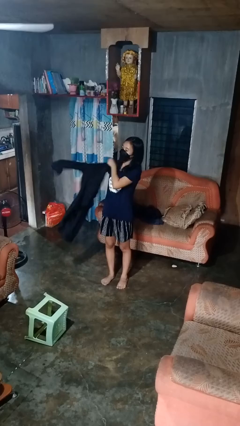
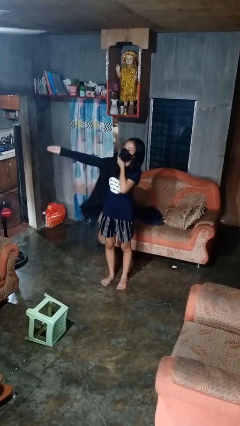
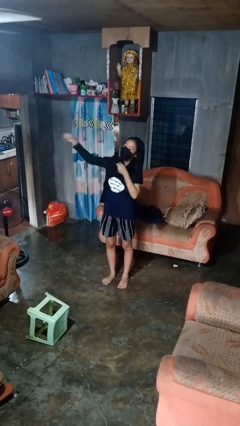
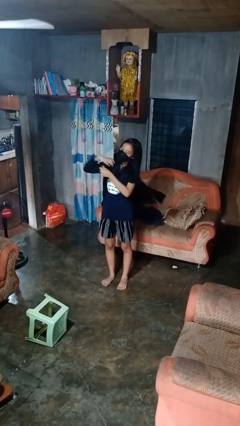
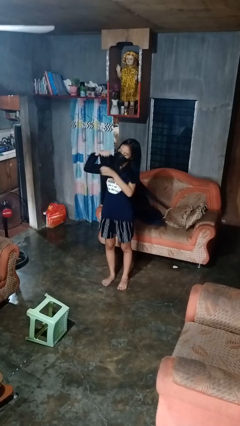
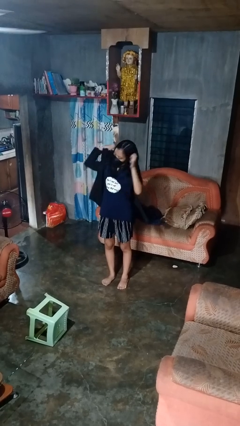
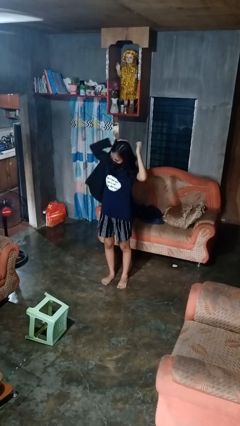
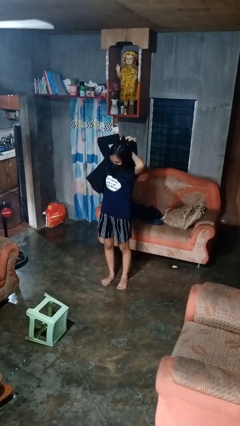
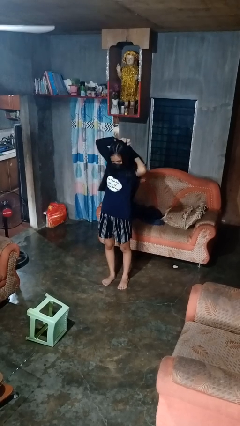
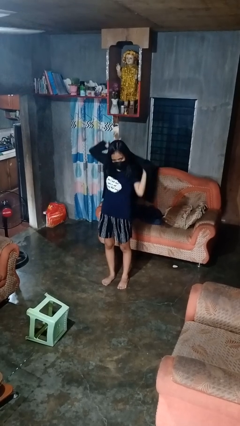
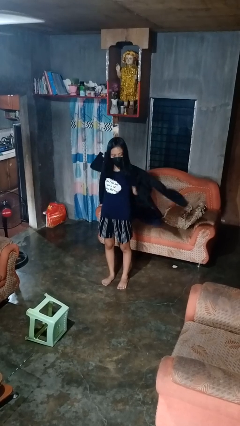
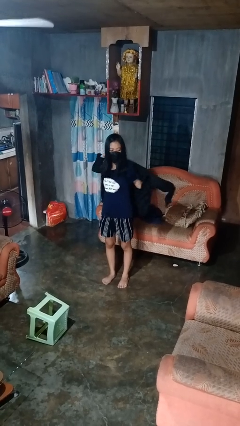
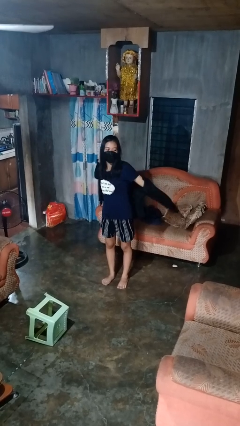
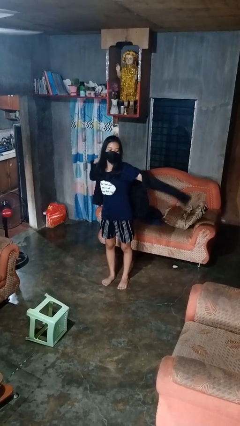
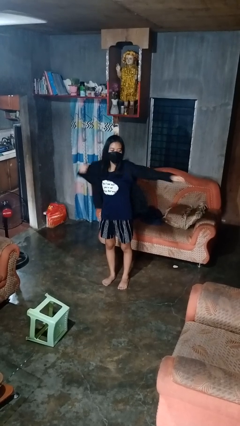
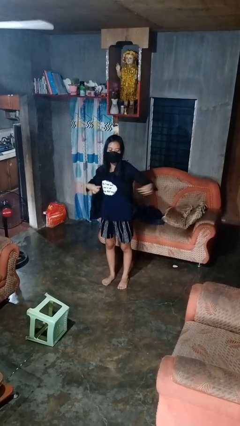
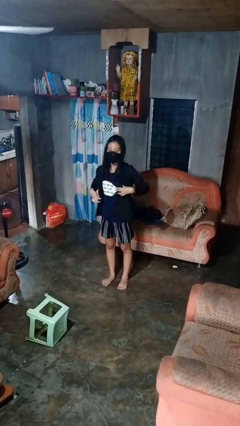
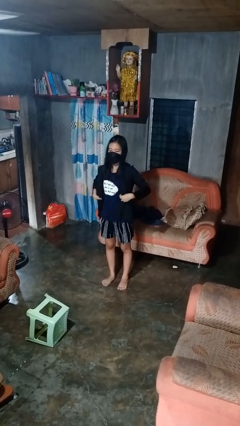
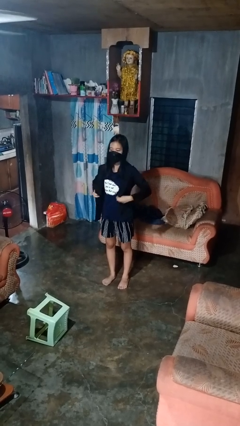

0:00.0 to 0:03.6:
person puts on shirt

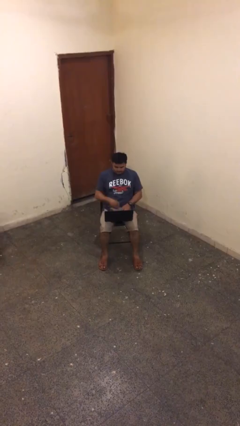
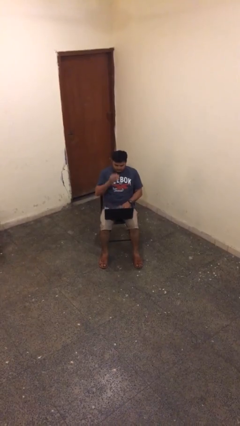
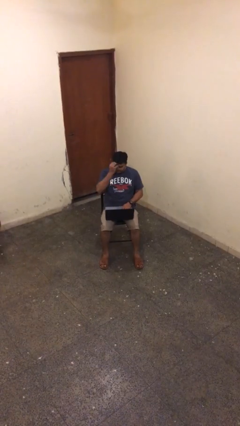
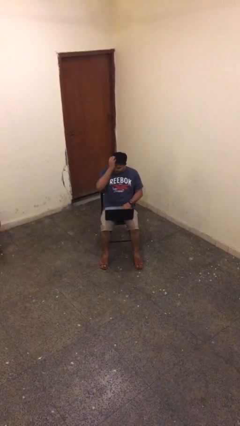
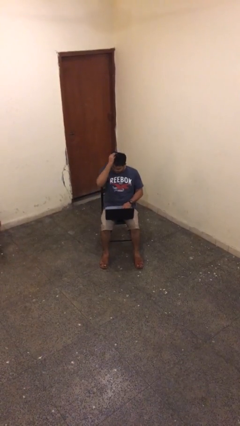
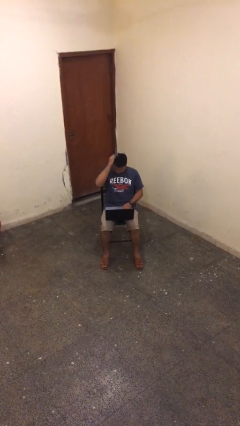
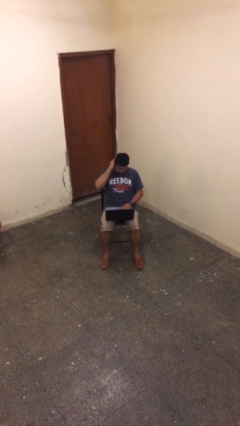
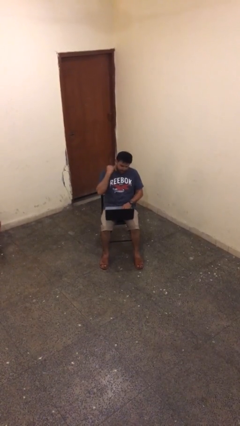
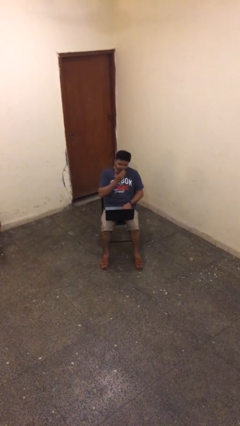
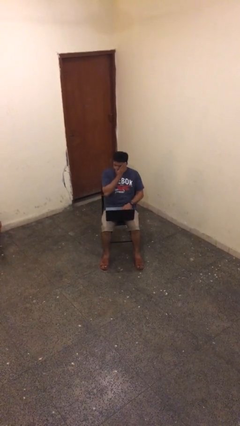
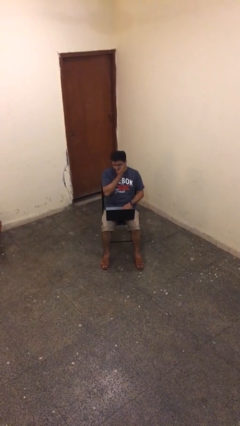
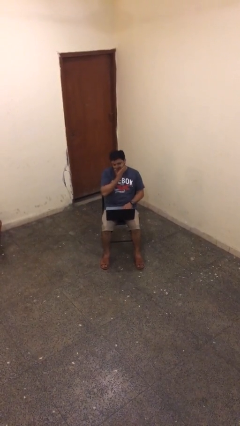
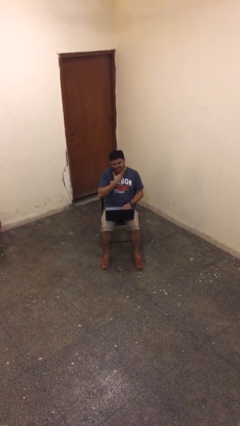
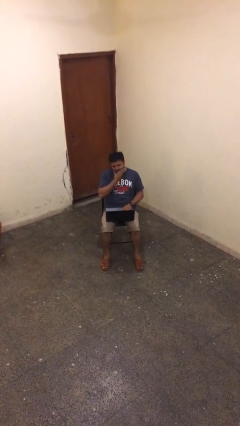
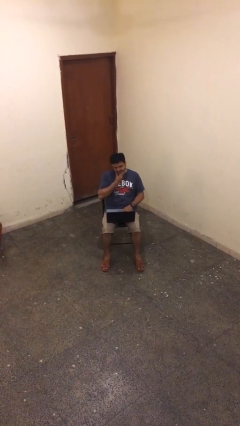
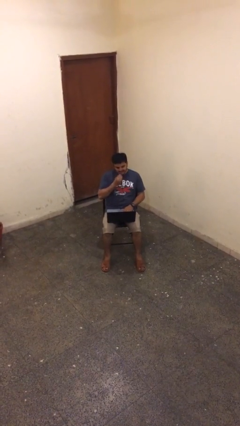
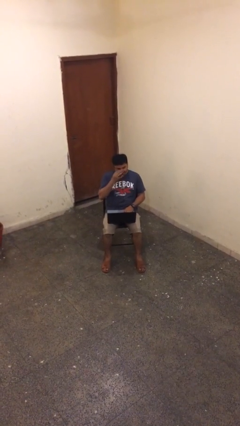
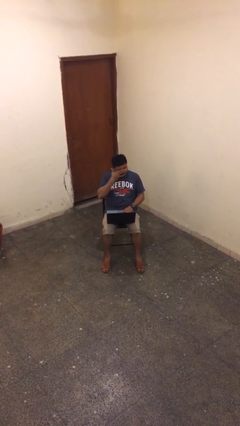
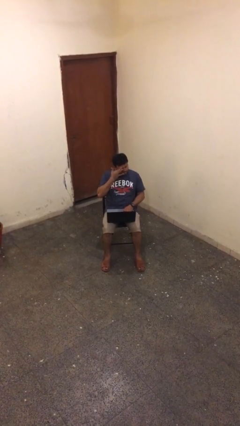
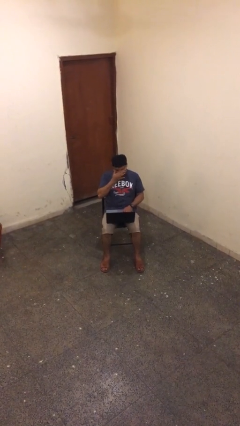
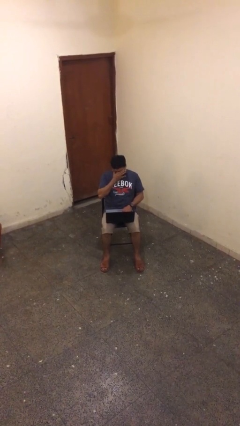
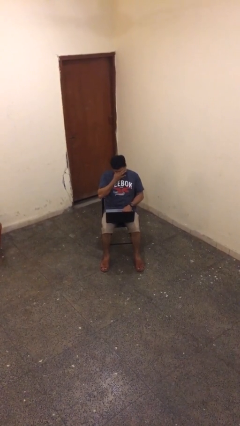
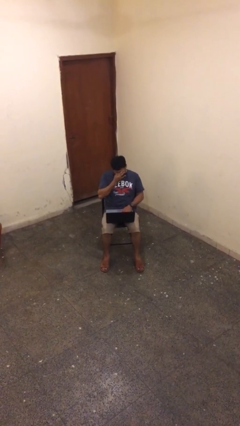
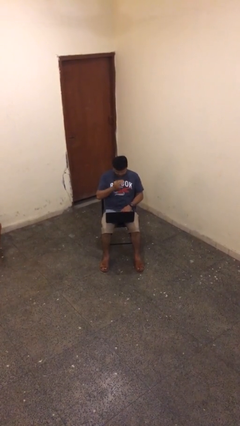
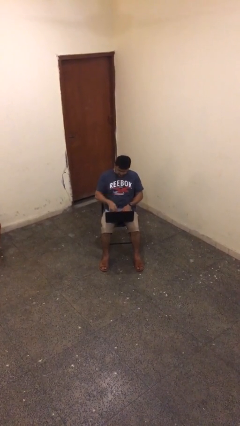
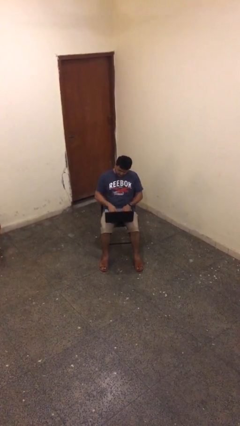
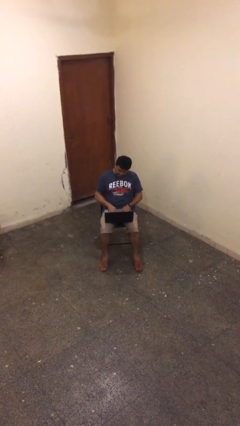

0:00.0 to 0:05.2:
person interacts with laptop

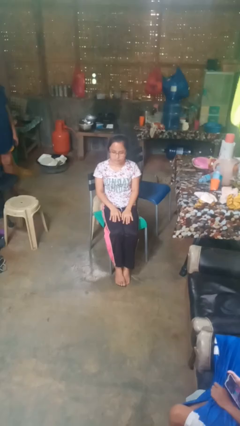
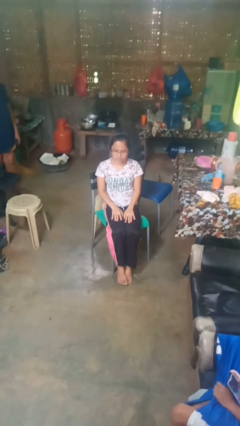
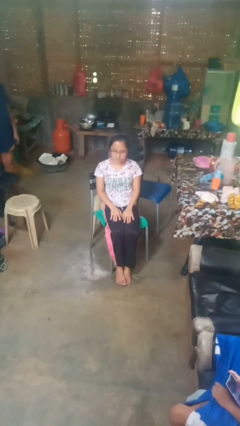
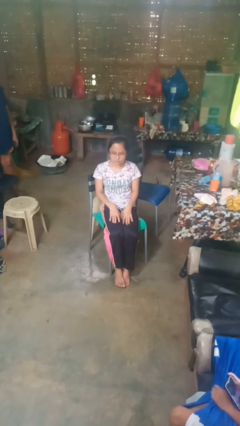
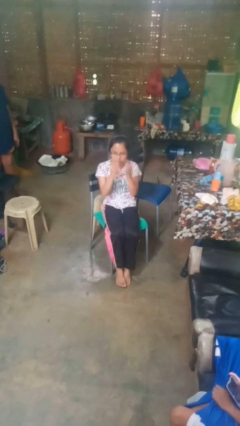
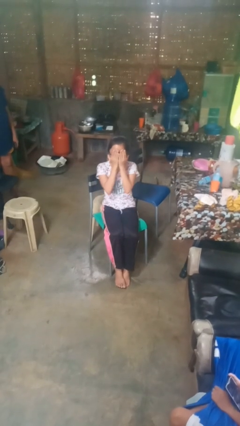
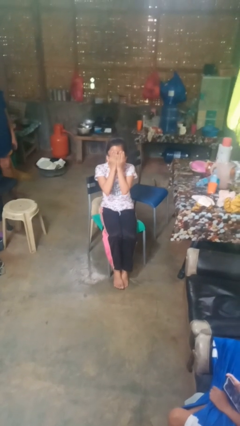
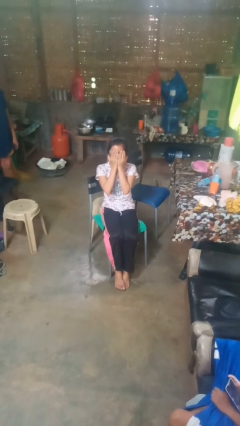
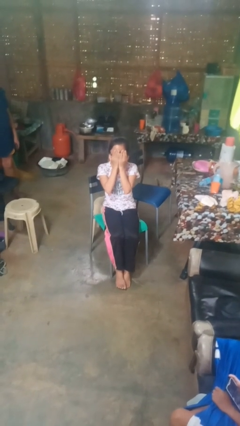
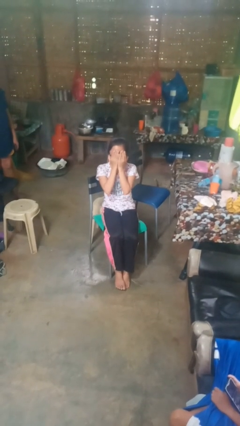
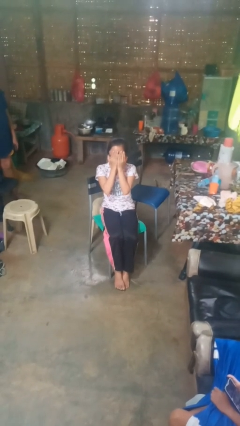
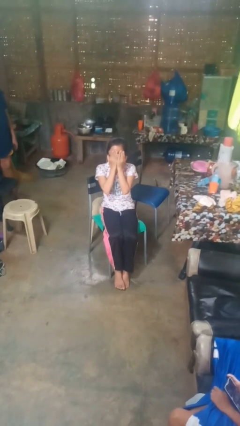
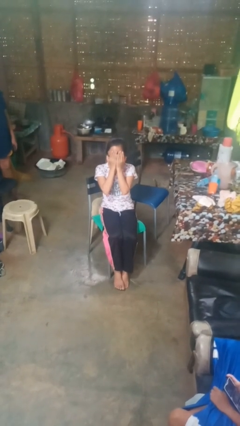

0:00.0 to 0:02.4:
person covers face with hands

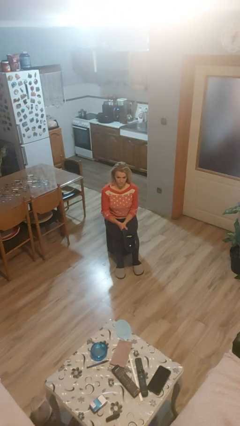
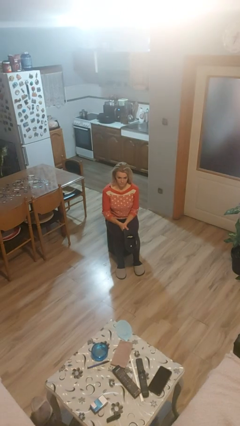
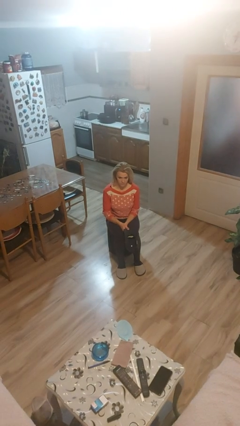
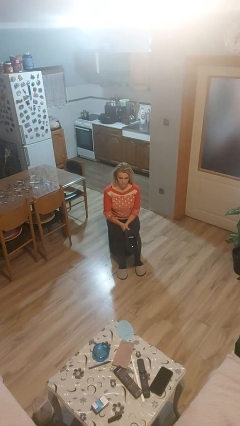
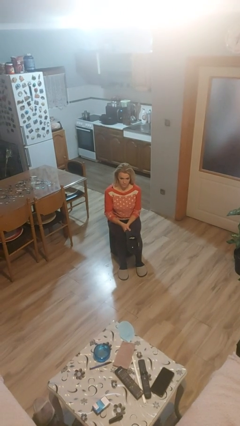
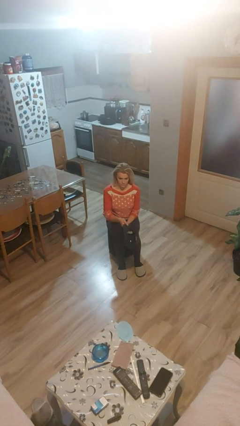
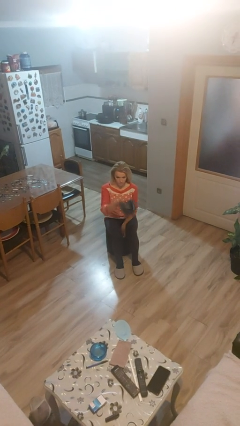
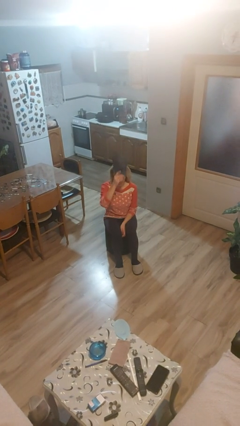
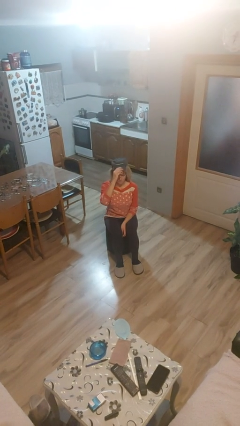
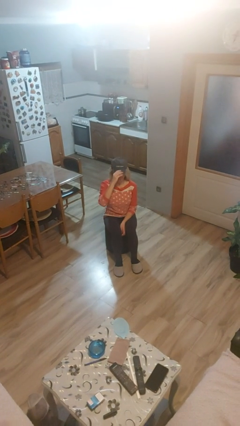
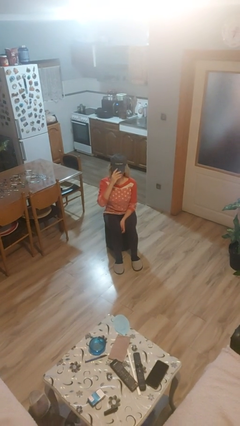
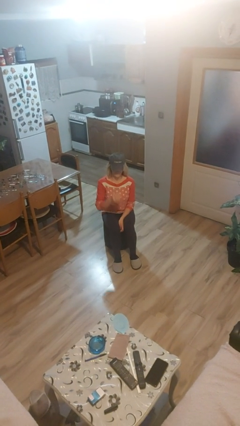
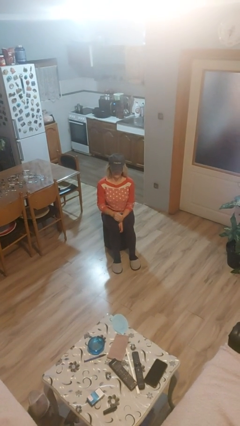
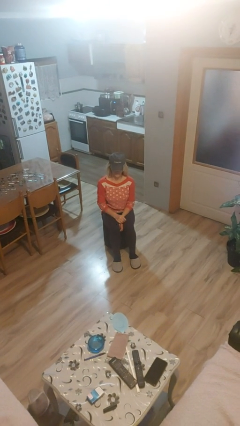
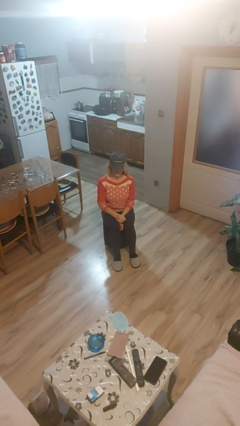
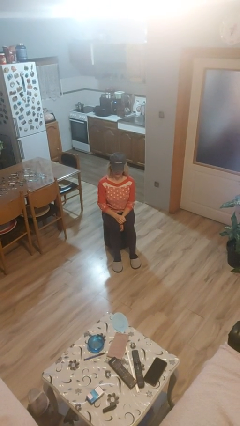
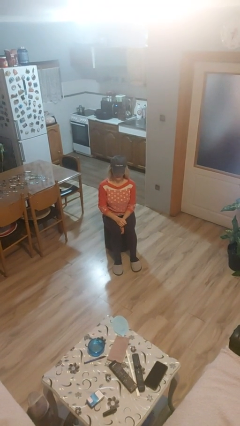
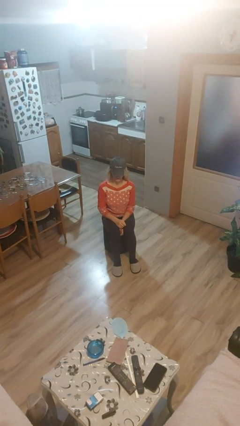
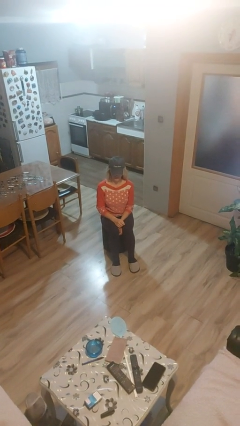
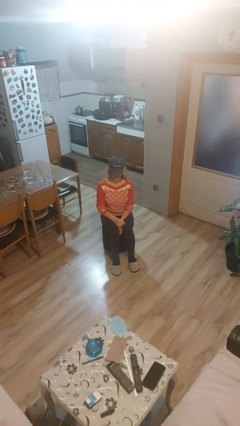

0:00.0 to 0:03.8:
person puts on hat

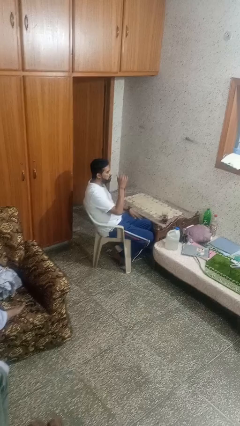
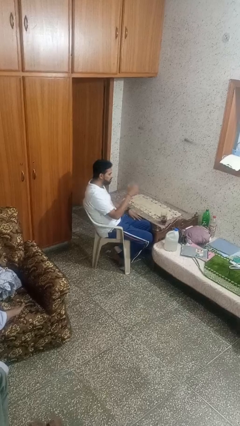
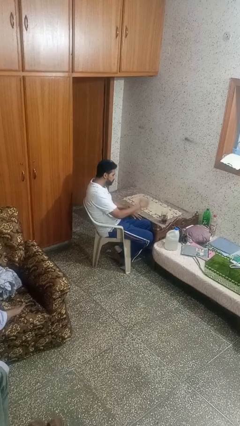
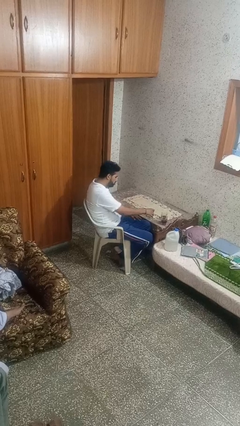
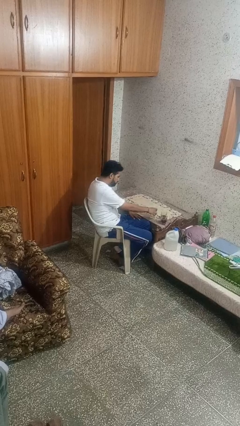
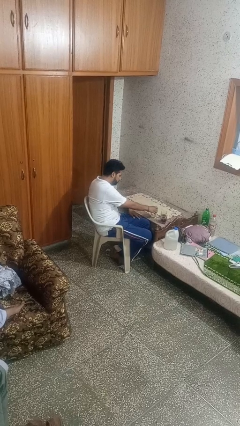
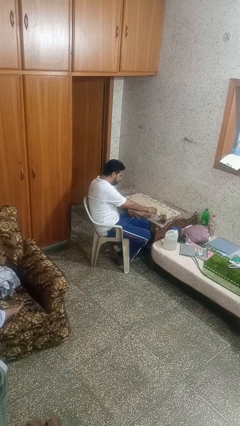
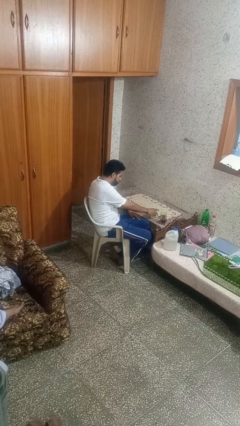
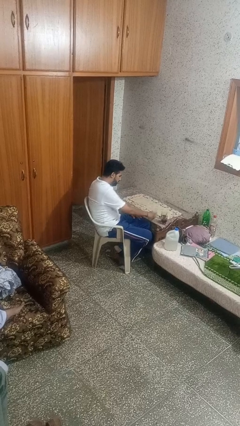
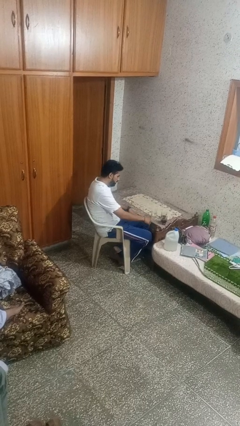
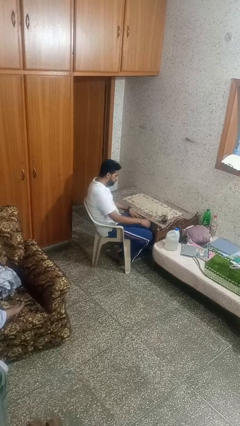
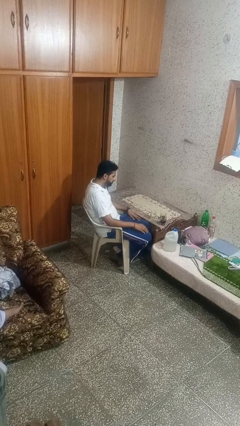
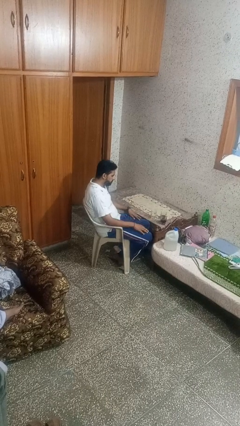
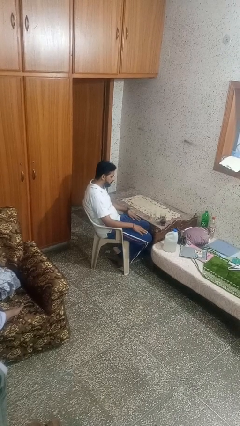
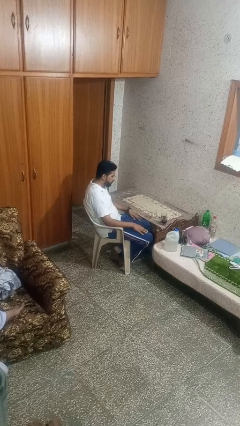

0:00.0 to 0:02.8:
person puts down object on table
